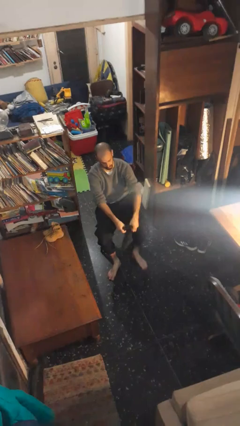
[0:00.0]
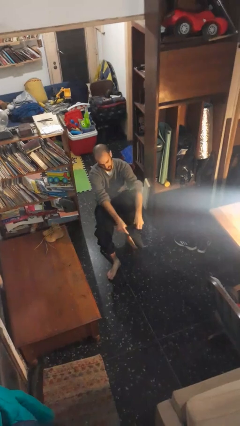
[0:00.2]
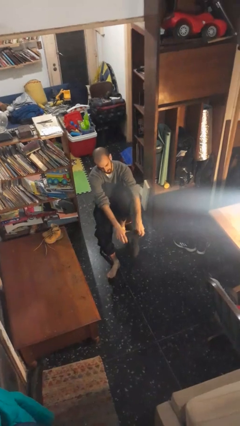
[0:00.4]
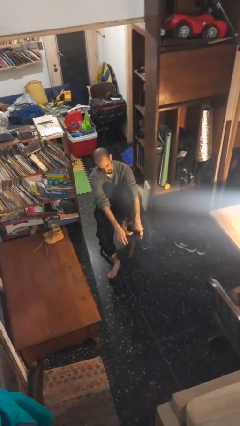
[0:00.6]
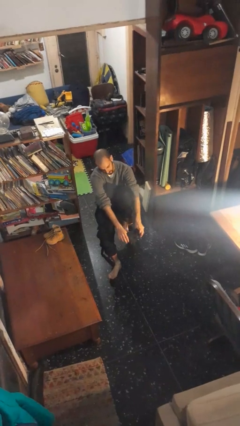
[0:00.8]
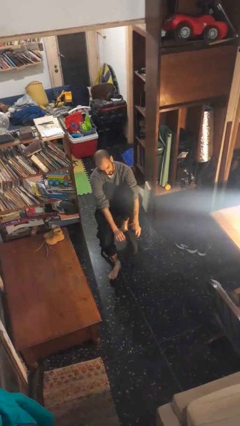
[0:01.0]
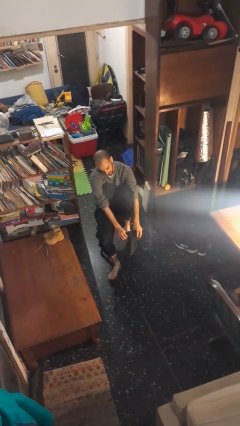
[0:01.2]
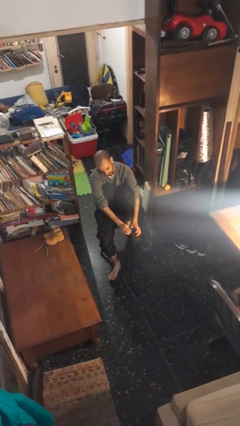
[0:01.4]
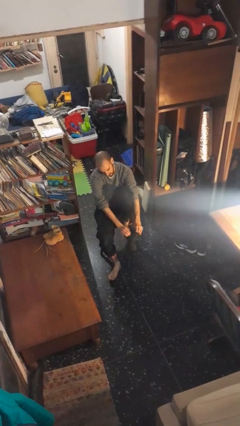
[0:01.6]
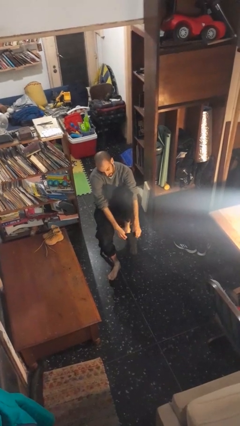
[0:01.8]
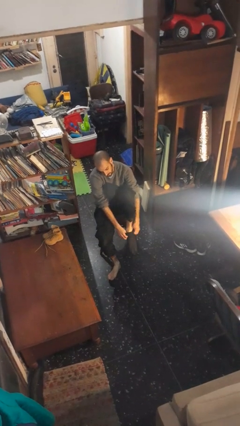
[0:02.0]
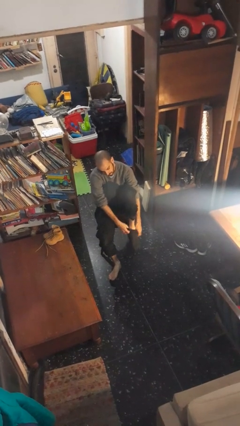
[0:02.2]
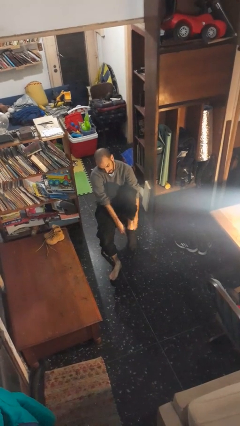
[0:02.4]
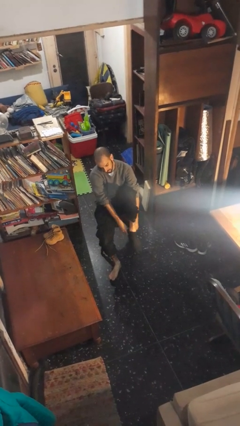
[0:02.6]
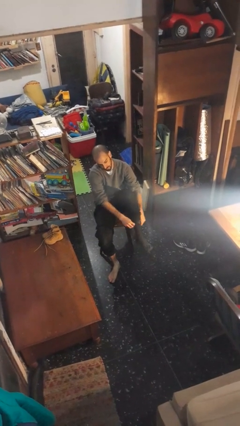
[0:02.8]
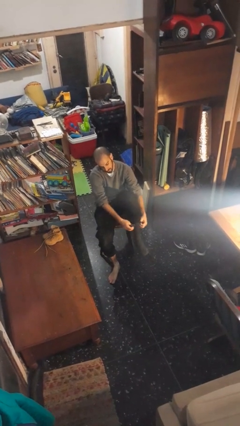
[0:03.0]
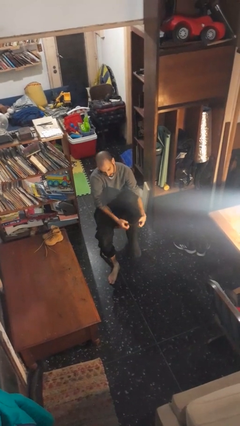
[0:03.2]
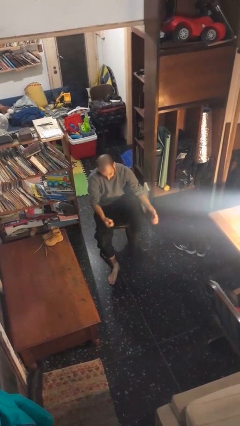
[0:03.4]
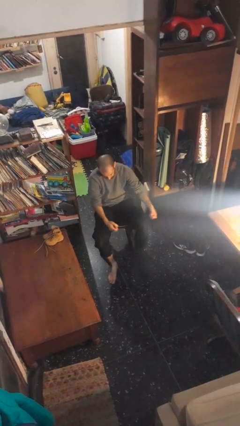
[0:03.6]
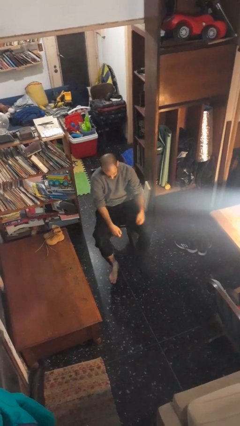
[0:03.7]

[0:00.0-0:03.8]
person puts on socks

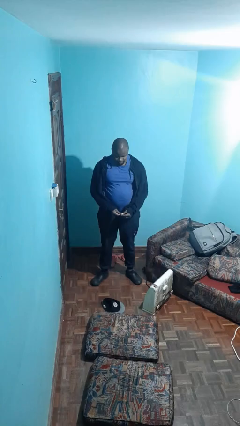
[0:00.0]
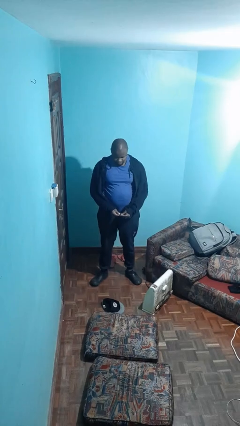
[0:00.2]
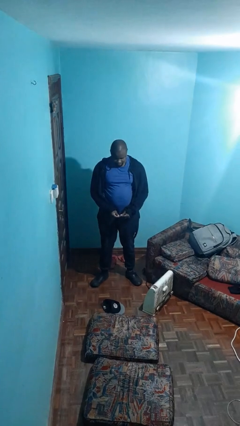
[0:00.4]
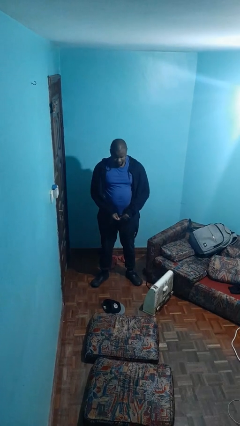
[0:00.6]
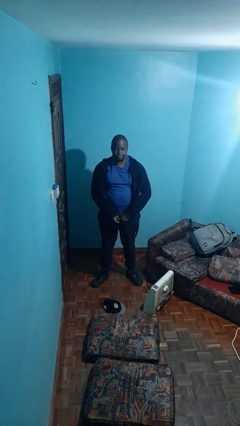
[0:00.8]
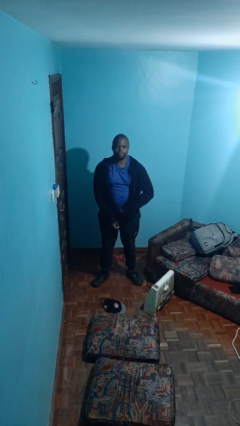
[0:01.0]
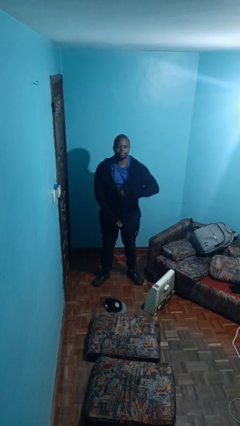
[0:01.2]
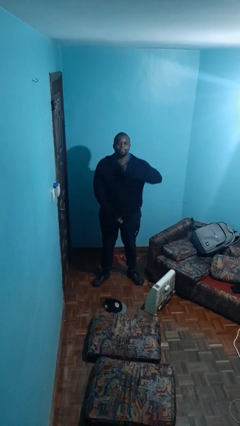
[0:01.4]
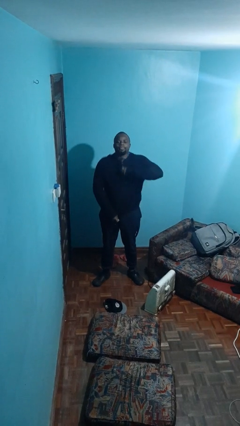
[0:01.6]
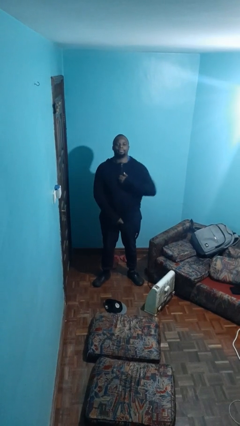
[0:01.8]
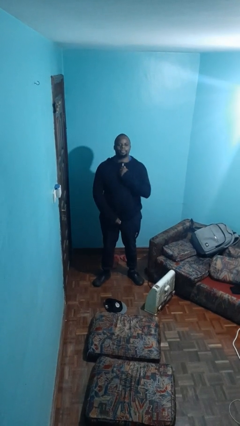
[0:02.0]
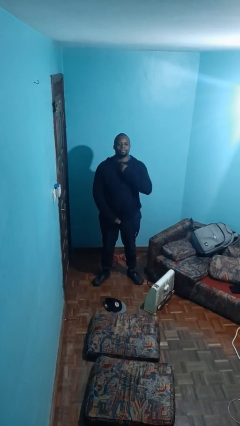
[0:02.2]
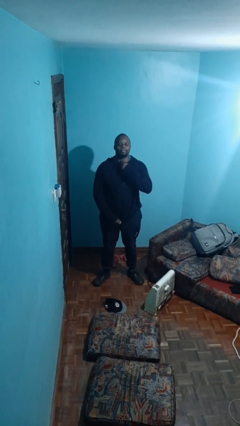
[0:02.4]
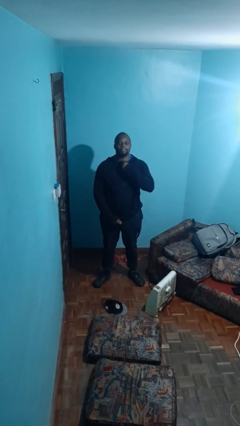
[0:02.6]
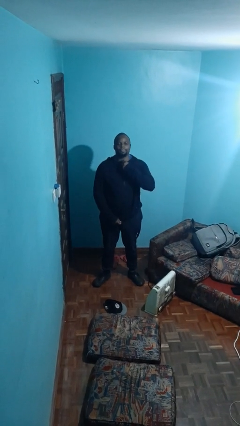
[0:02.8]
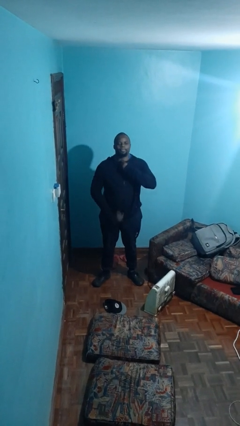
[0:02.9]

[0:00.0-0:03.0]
person zips up jacket

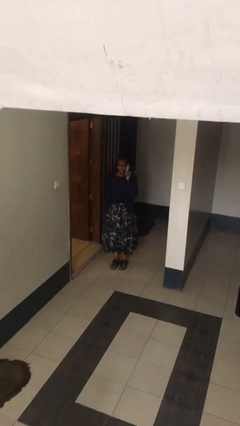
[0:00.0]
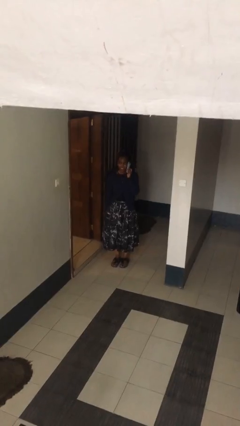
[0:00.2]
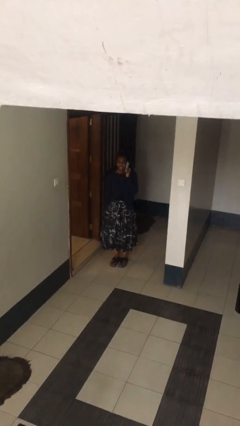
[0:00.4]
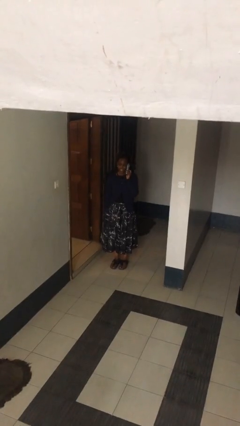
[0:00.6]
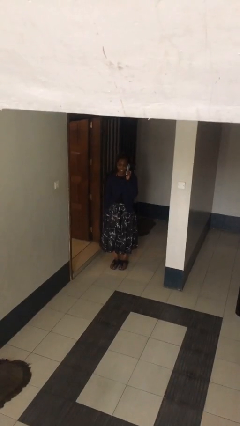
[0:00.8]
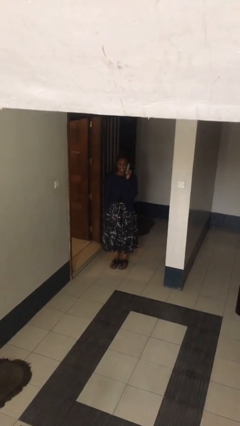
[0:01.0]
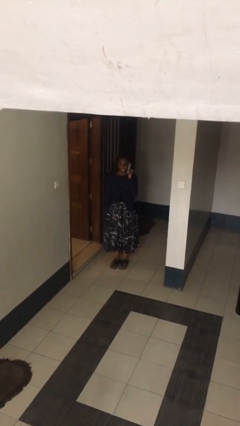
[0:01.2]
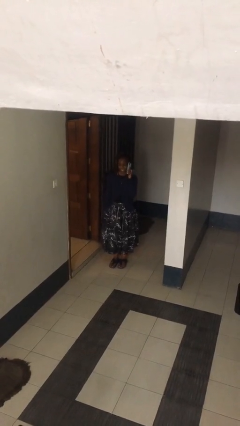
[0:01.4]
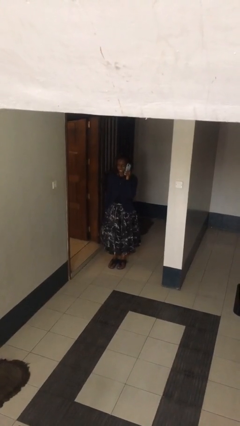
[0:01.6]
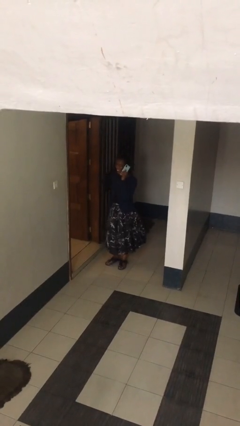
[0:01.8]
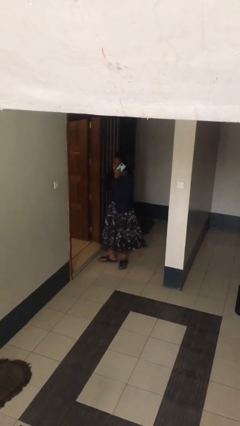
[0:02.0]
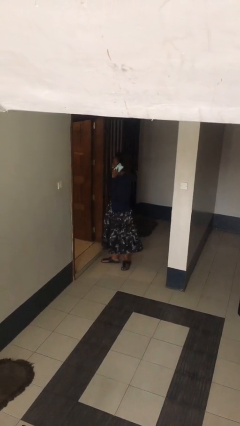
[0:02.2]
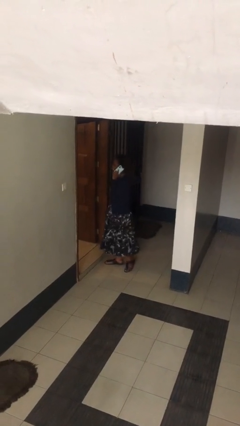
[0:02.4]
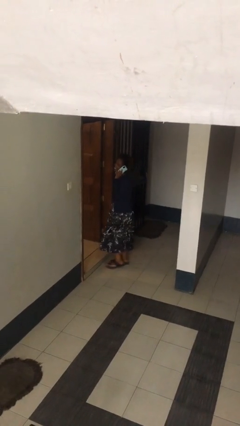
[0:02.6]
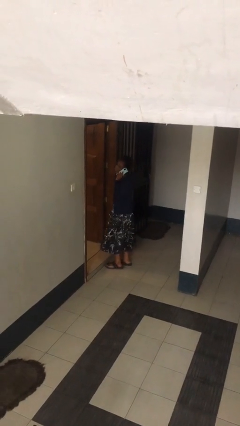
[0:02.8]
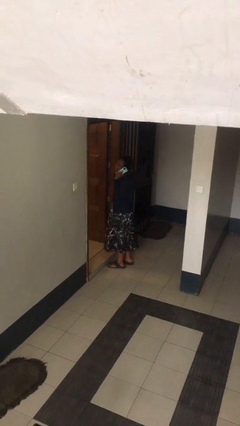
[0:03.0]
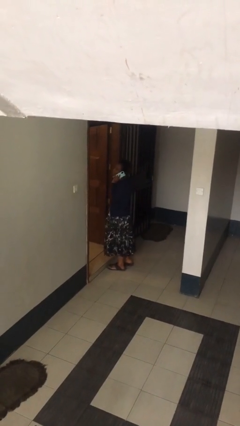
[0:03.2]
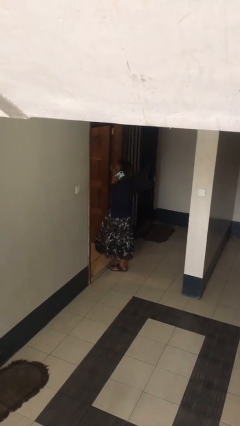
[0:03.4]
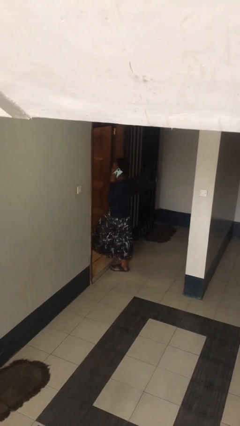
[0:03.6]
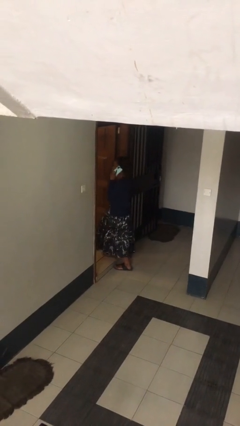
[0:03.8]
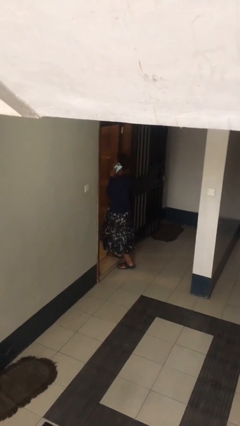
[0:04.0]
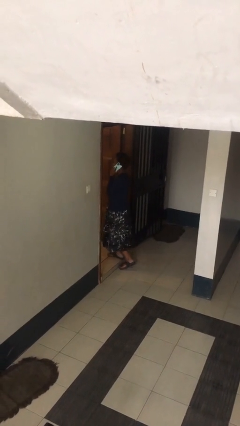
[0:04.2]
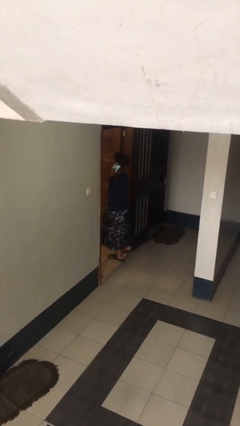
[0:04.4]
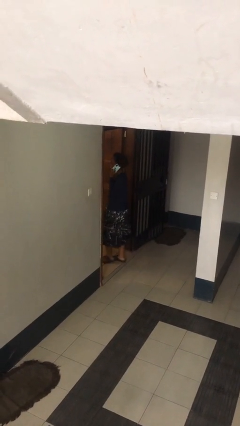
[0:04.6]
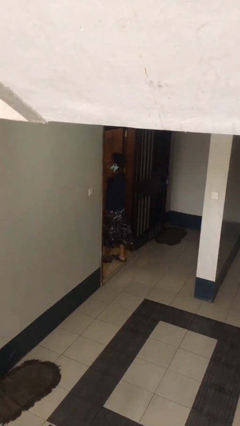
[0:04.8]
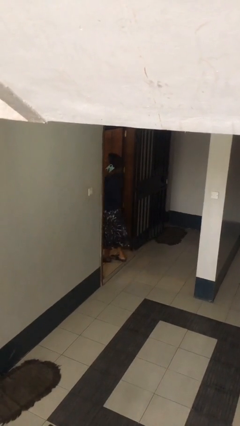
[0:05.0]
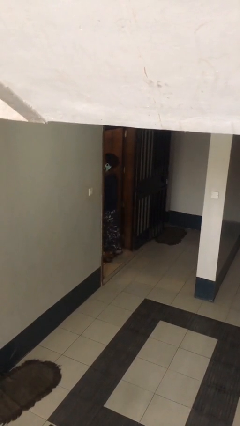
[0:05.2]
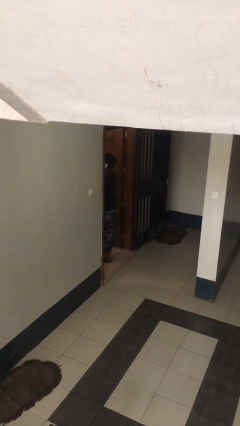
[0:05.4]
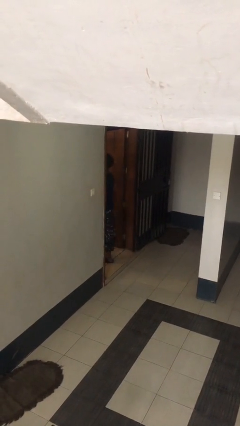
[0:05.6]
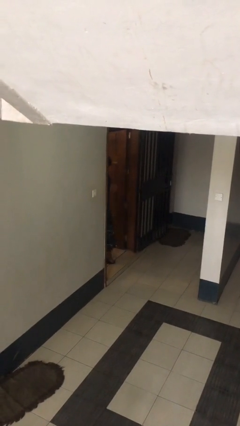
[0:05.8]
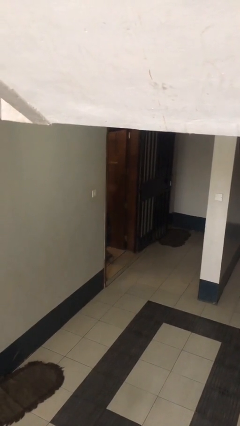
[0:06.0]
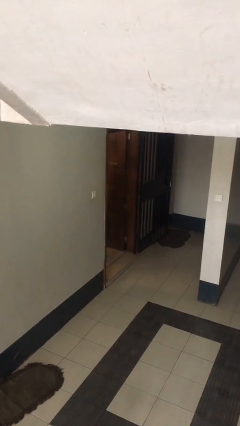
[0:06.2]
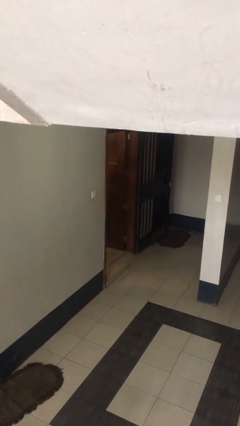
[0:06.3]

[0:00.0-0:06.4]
person exits scene through structure

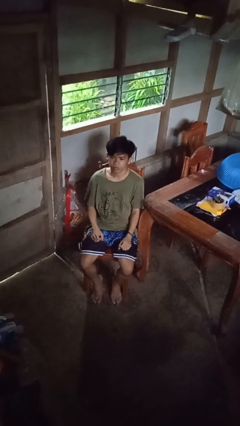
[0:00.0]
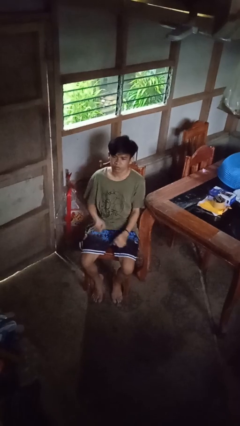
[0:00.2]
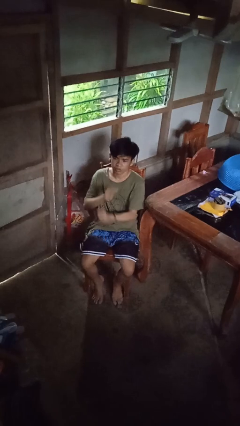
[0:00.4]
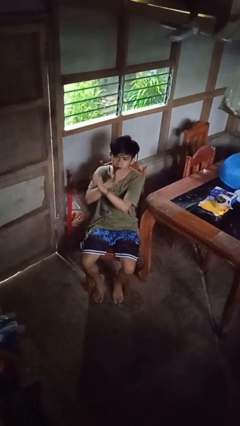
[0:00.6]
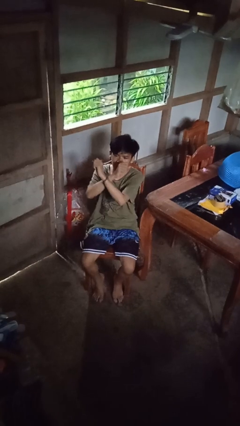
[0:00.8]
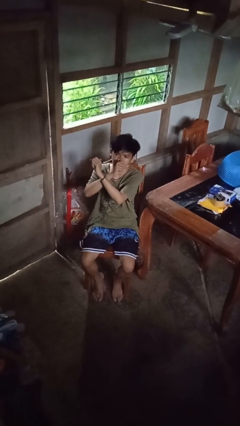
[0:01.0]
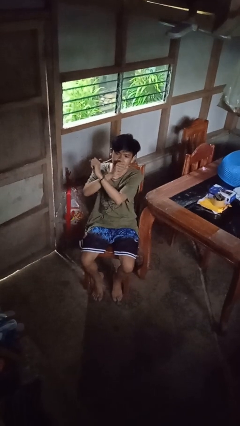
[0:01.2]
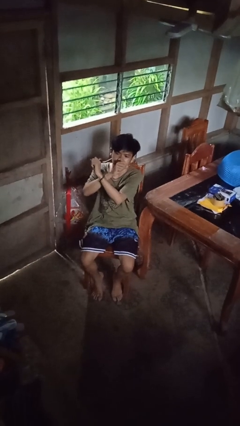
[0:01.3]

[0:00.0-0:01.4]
person gestures arms x

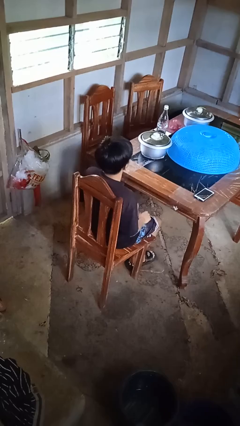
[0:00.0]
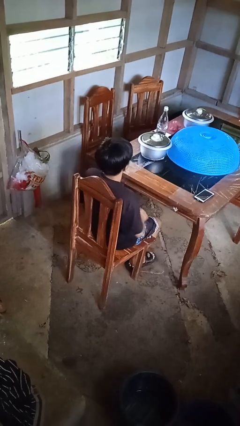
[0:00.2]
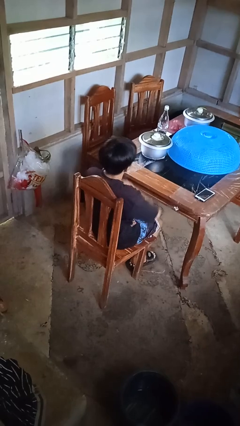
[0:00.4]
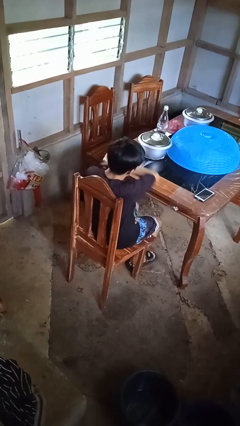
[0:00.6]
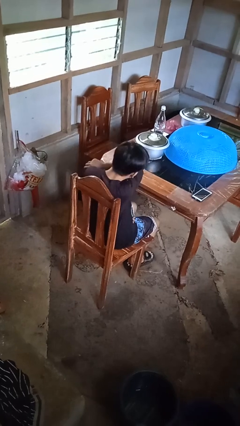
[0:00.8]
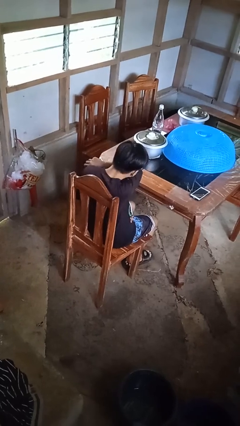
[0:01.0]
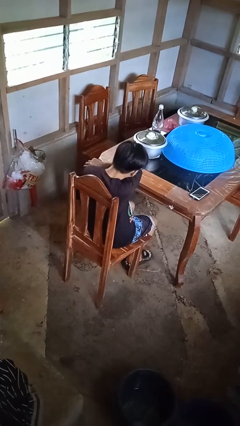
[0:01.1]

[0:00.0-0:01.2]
person sneezes into arm

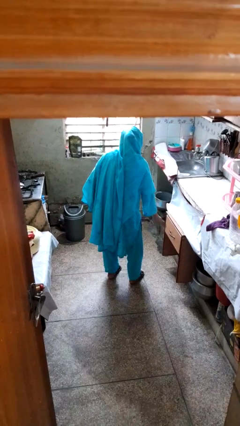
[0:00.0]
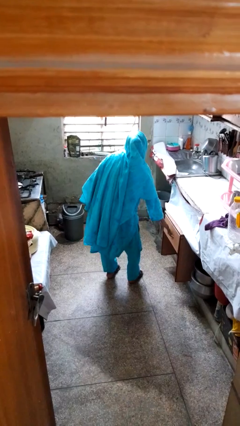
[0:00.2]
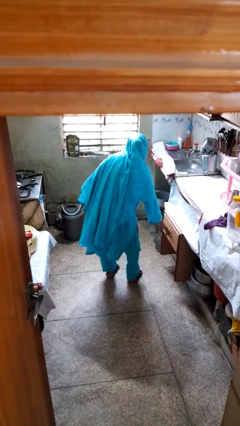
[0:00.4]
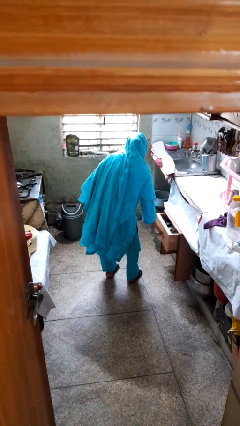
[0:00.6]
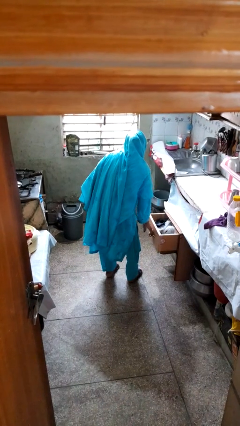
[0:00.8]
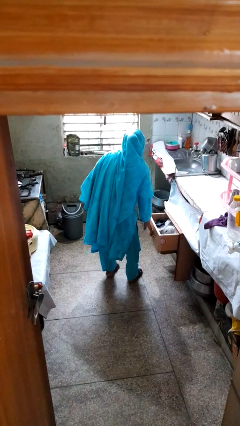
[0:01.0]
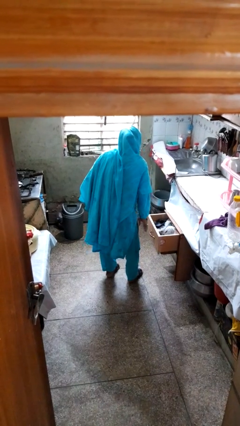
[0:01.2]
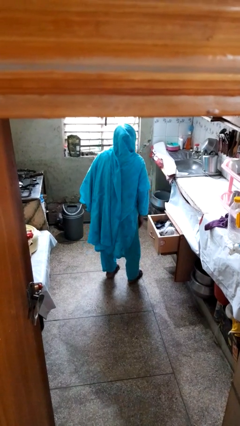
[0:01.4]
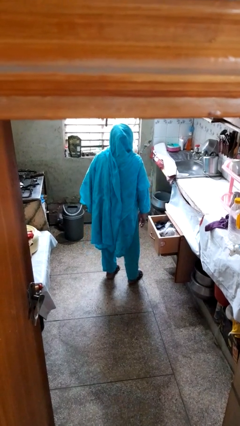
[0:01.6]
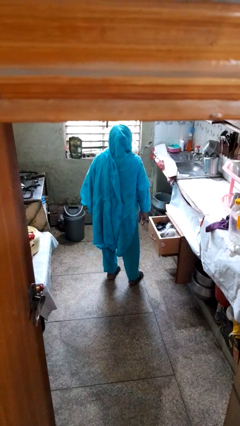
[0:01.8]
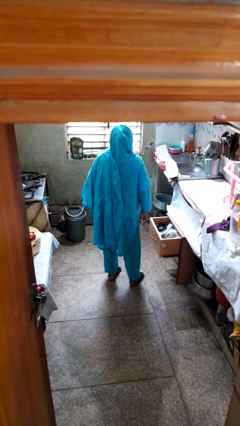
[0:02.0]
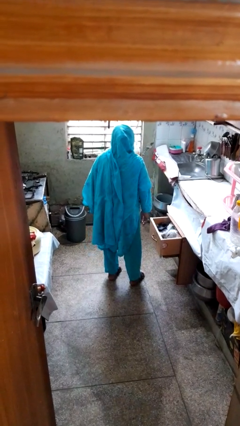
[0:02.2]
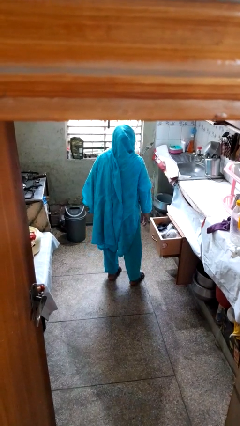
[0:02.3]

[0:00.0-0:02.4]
person opens kitchen drawer
